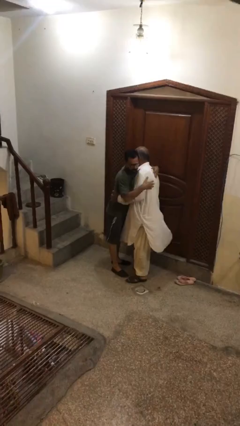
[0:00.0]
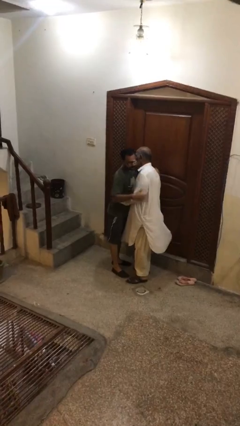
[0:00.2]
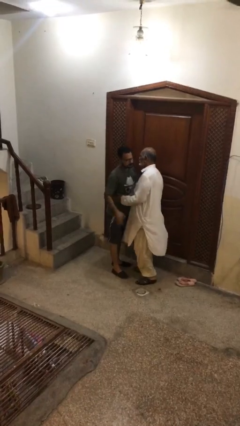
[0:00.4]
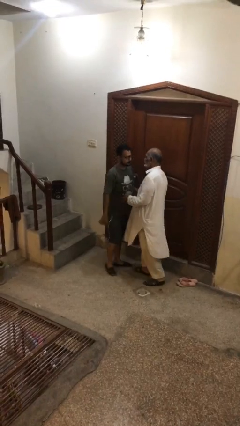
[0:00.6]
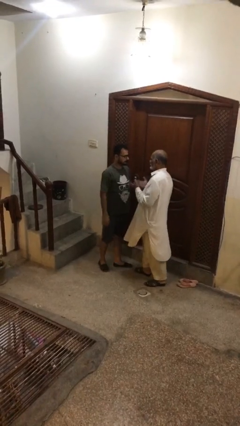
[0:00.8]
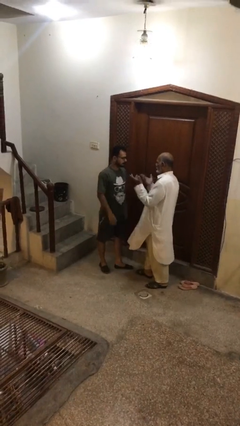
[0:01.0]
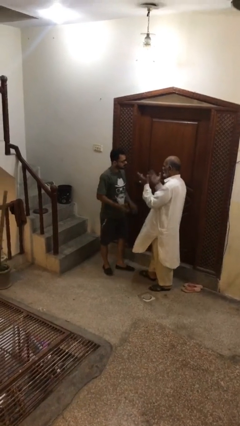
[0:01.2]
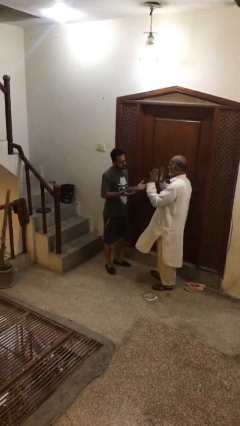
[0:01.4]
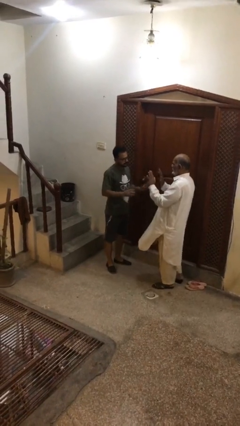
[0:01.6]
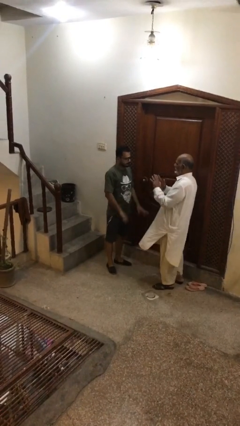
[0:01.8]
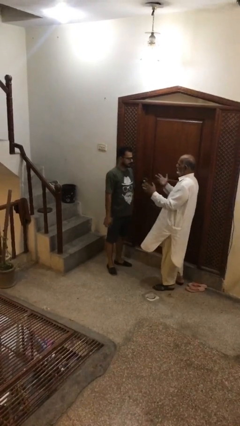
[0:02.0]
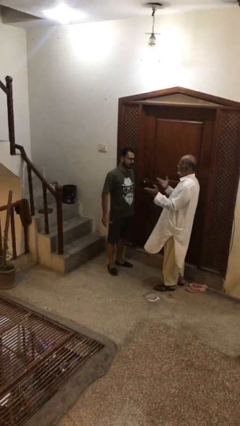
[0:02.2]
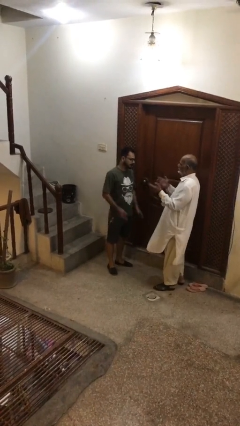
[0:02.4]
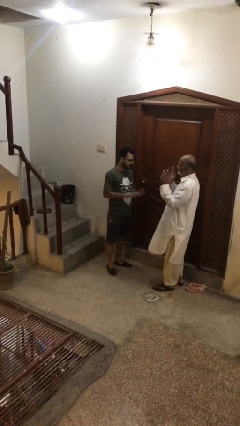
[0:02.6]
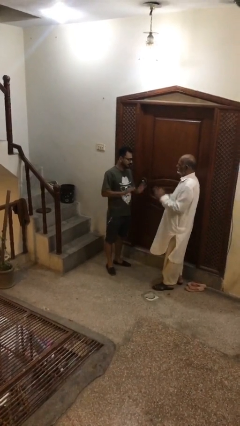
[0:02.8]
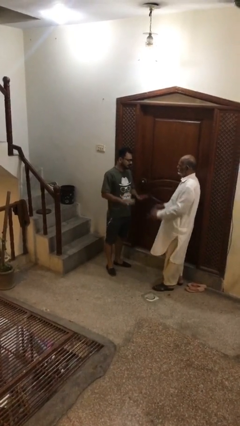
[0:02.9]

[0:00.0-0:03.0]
person talks to person

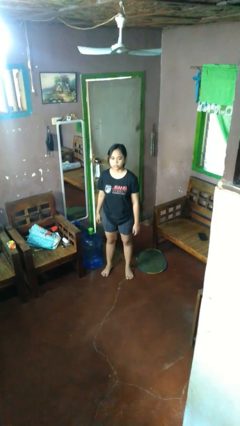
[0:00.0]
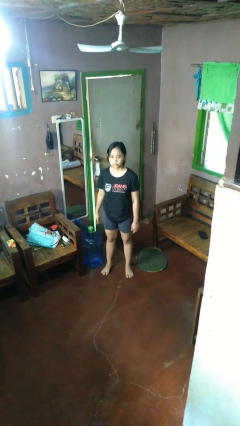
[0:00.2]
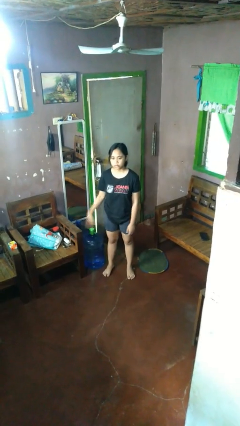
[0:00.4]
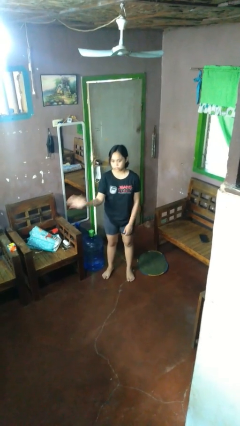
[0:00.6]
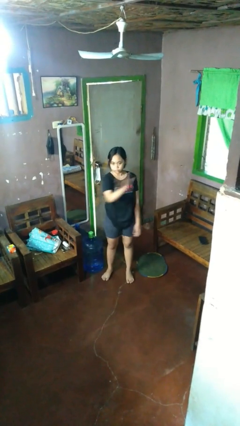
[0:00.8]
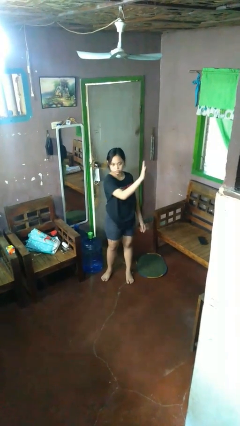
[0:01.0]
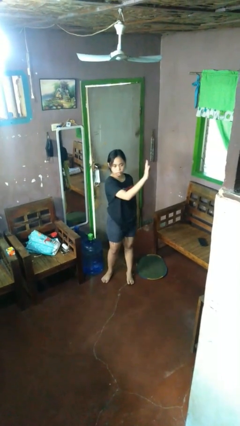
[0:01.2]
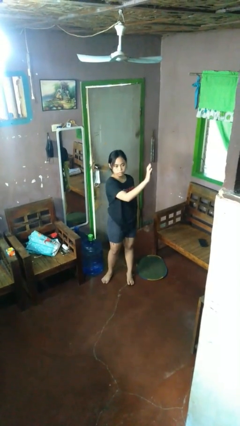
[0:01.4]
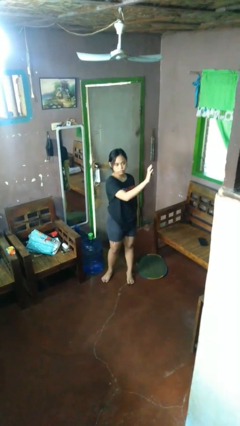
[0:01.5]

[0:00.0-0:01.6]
person gestures swipe left

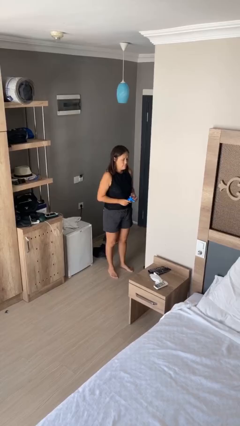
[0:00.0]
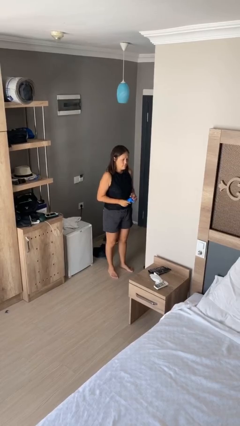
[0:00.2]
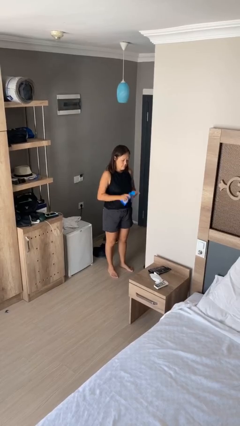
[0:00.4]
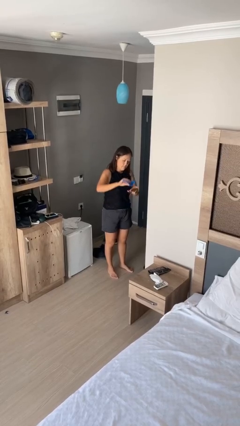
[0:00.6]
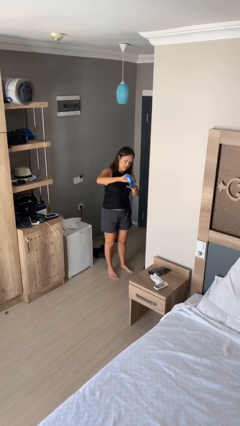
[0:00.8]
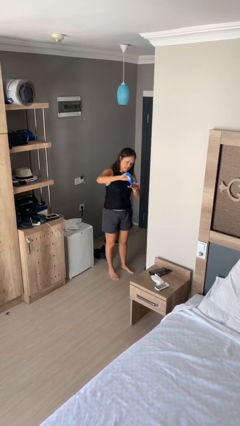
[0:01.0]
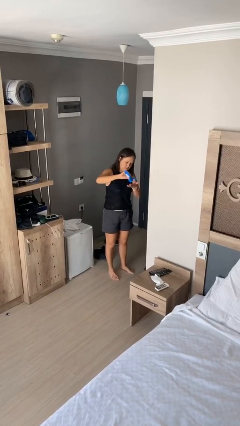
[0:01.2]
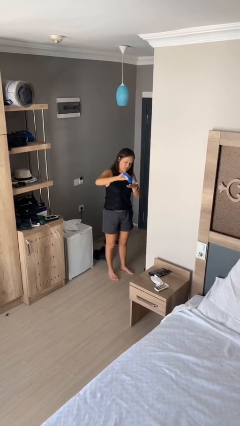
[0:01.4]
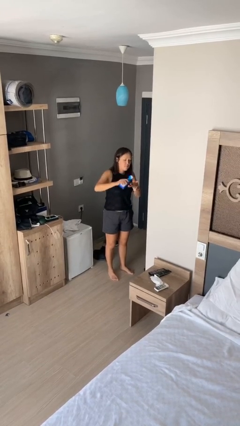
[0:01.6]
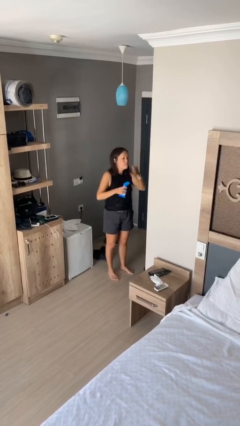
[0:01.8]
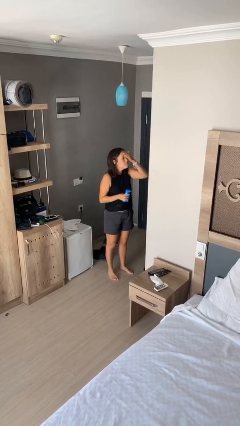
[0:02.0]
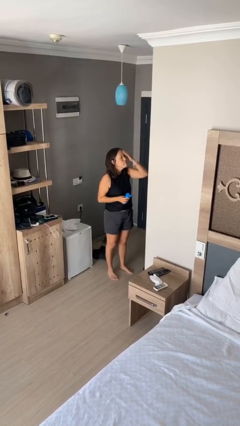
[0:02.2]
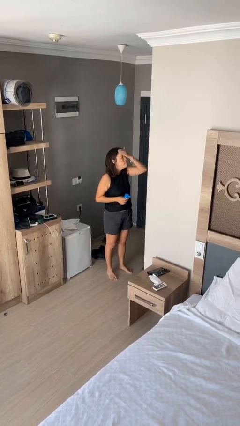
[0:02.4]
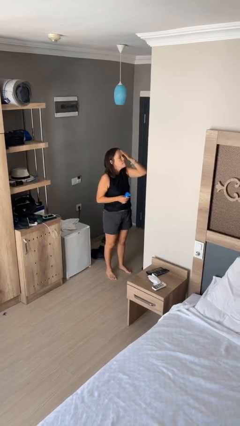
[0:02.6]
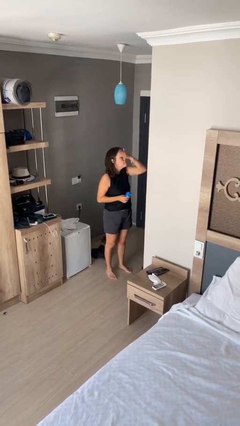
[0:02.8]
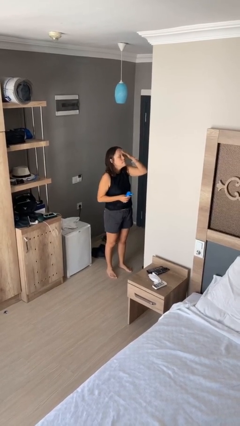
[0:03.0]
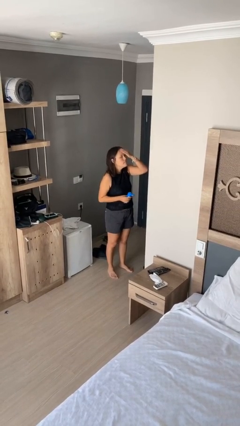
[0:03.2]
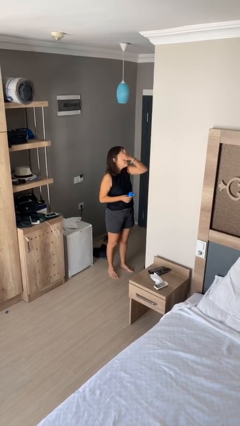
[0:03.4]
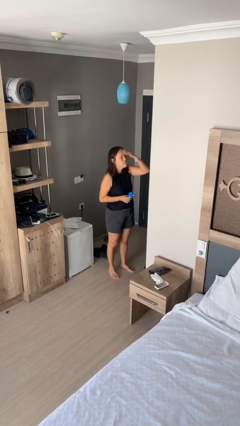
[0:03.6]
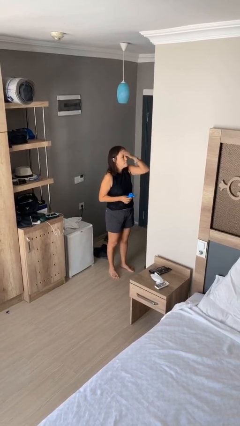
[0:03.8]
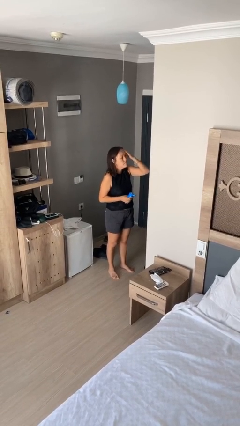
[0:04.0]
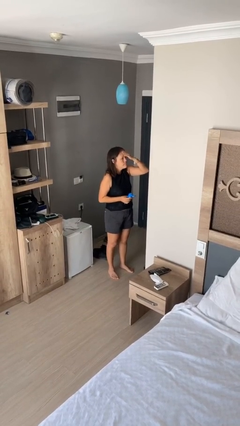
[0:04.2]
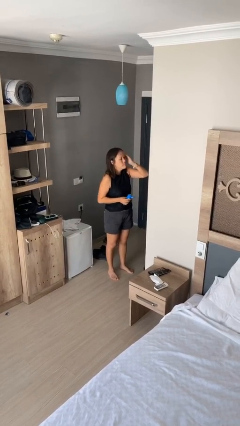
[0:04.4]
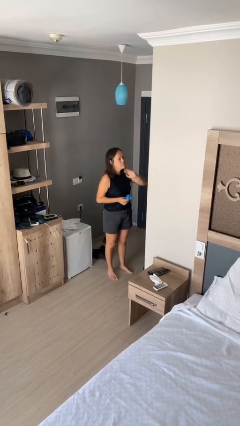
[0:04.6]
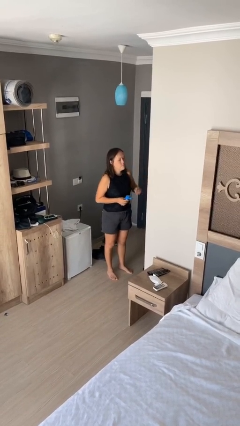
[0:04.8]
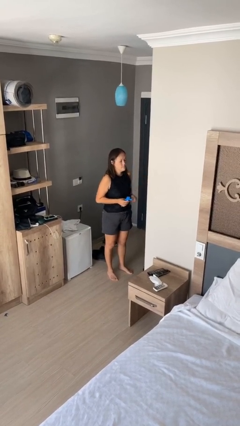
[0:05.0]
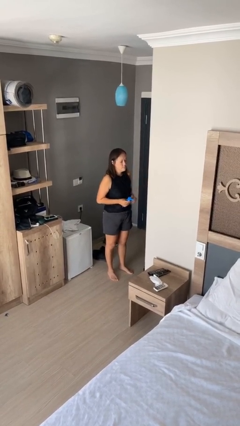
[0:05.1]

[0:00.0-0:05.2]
person applies facial moisturizer

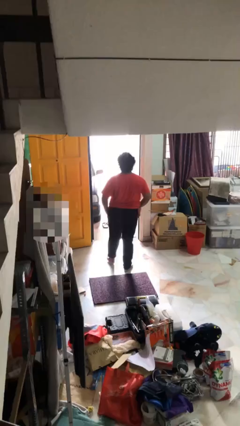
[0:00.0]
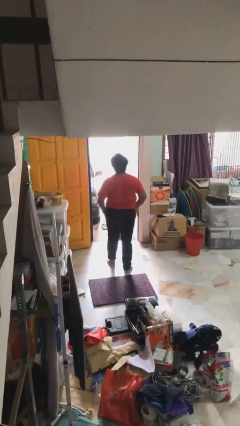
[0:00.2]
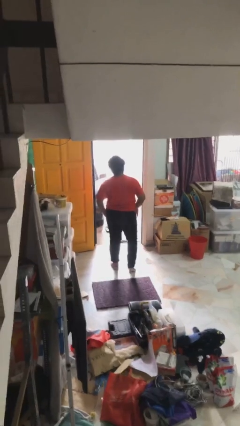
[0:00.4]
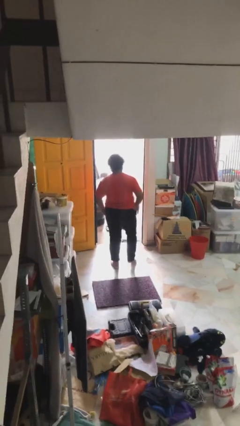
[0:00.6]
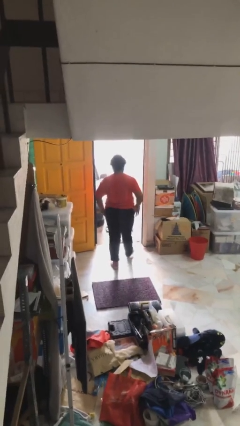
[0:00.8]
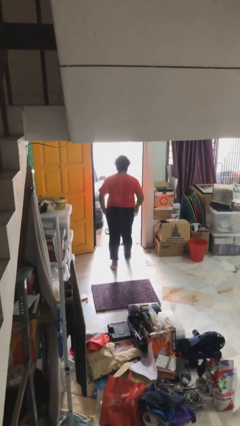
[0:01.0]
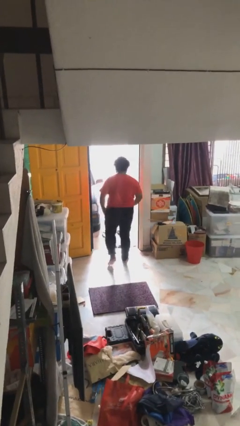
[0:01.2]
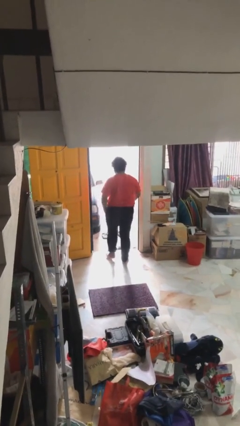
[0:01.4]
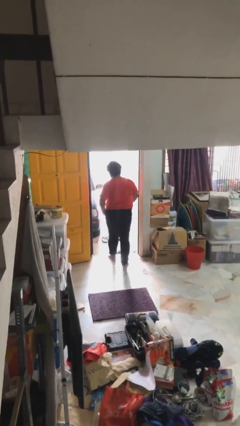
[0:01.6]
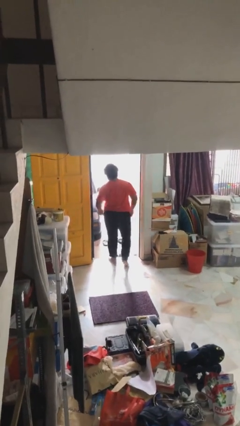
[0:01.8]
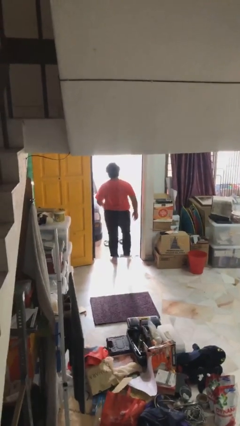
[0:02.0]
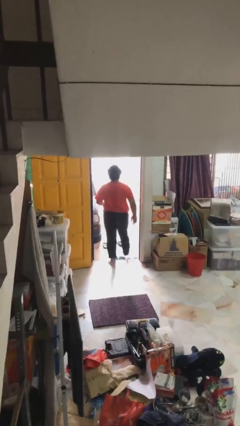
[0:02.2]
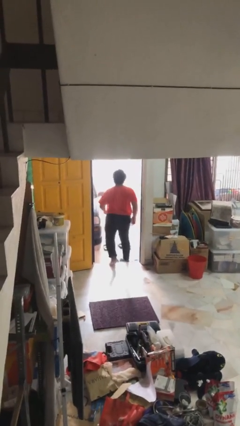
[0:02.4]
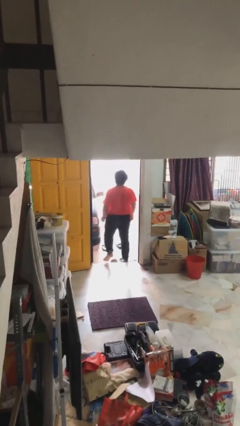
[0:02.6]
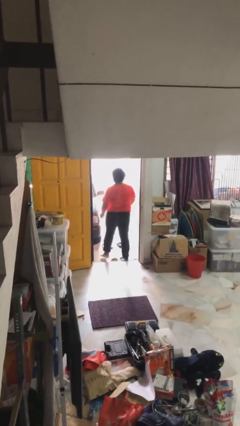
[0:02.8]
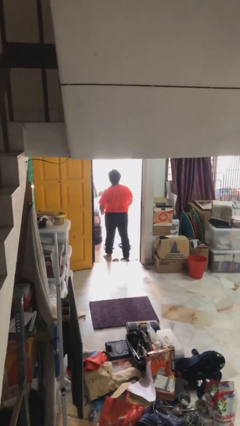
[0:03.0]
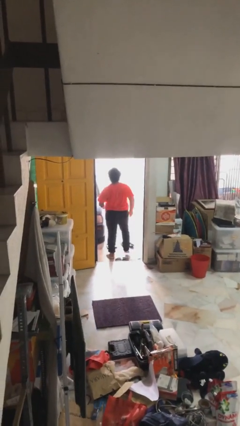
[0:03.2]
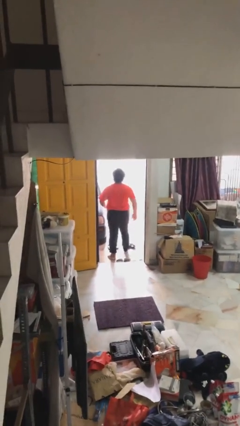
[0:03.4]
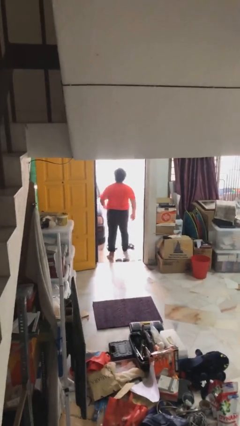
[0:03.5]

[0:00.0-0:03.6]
person exits scene through structure

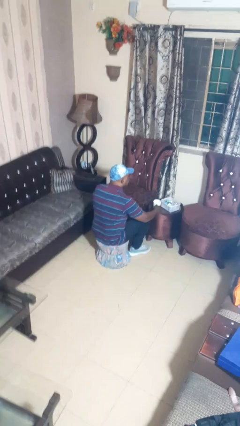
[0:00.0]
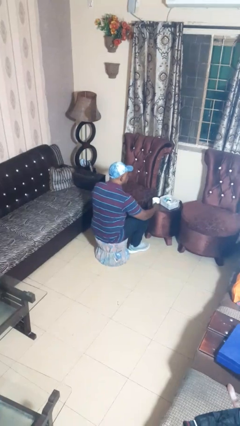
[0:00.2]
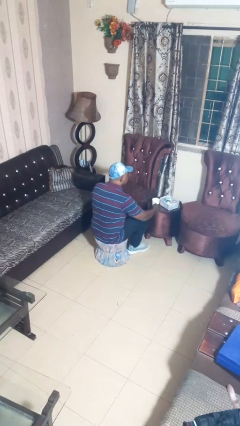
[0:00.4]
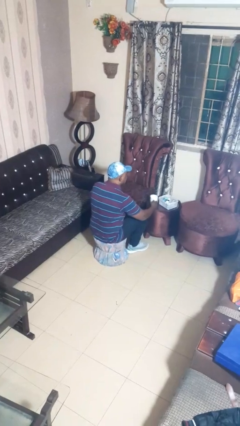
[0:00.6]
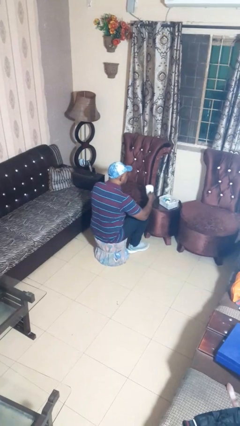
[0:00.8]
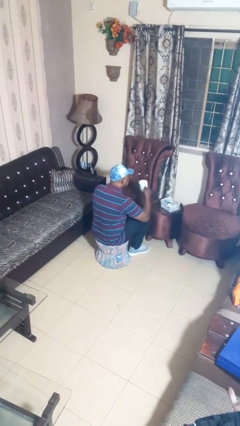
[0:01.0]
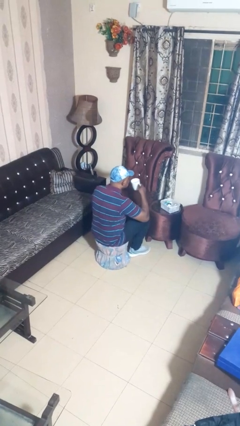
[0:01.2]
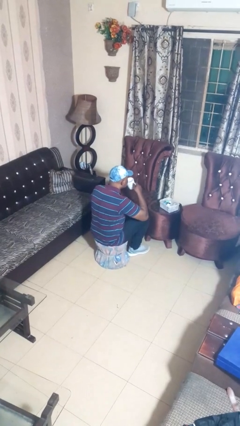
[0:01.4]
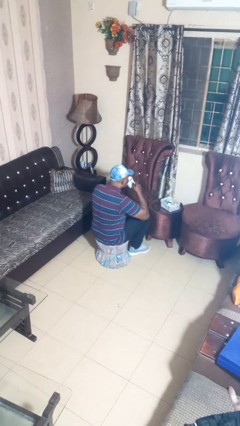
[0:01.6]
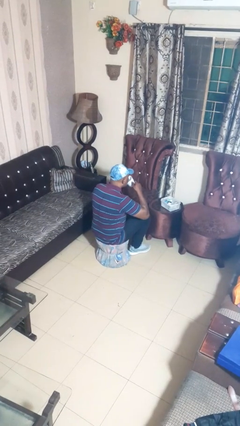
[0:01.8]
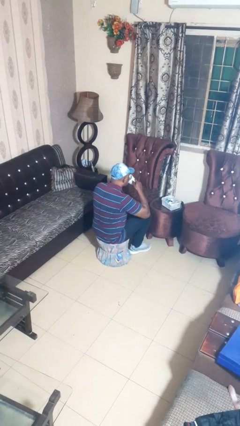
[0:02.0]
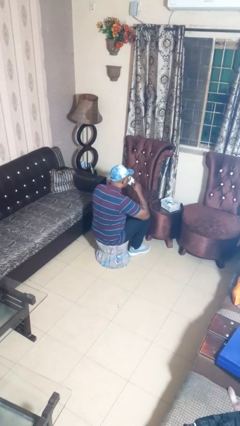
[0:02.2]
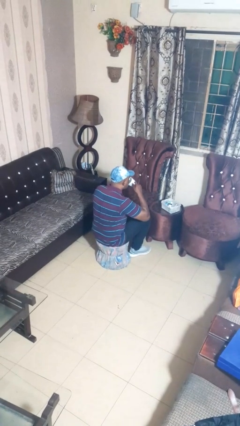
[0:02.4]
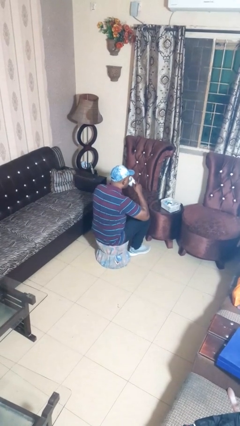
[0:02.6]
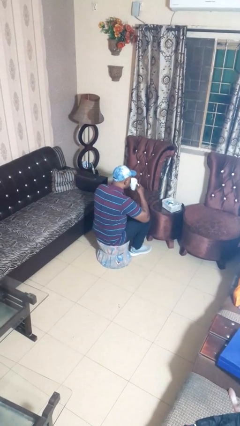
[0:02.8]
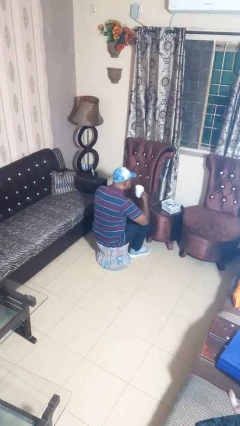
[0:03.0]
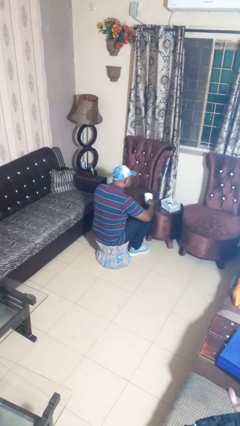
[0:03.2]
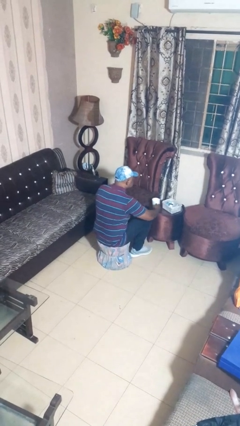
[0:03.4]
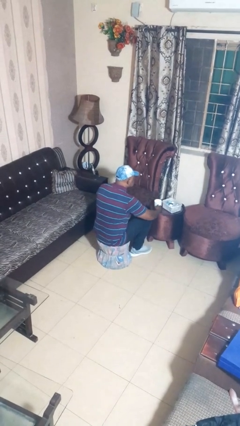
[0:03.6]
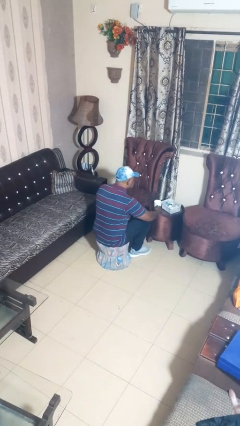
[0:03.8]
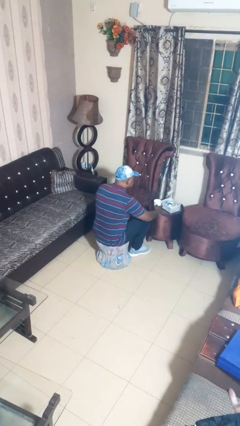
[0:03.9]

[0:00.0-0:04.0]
person drinks from cup

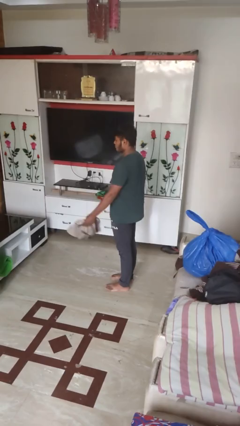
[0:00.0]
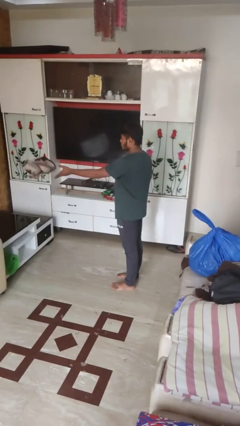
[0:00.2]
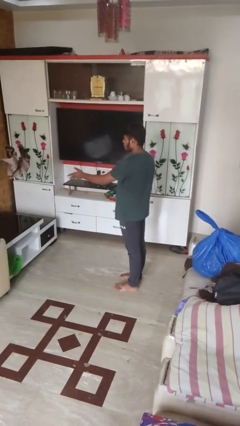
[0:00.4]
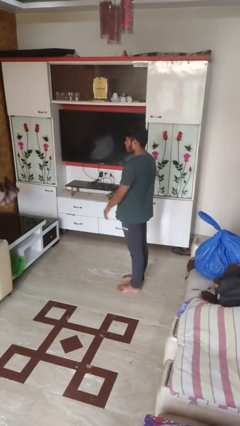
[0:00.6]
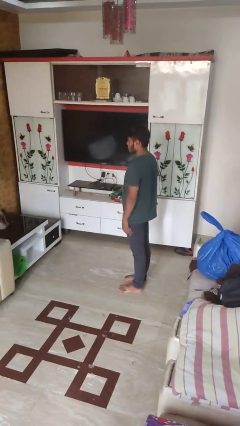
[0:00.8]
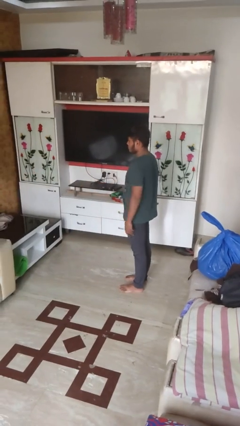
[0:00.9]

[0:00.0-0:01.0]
person throws object on table
